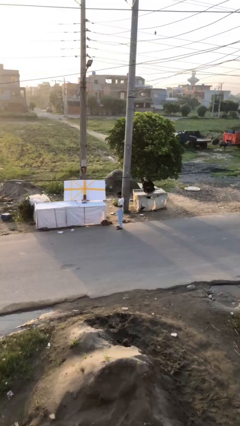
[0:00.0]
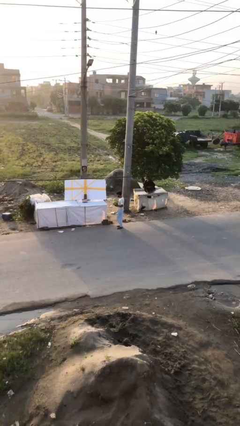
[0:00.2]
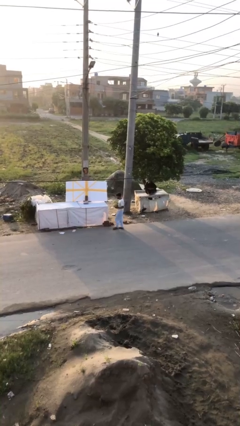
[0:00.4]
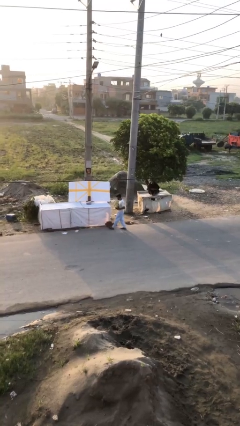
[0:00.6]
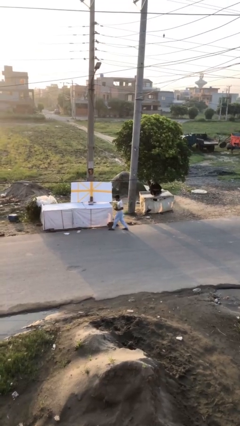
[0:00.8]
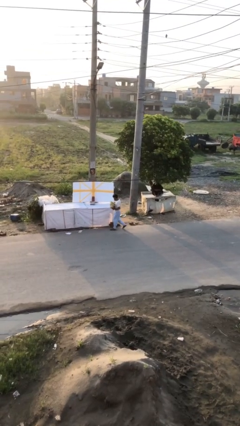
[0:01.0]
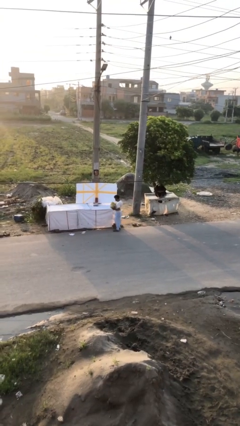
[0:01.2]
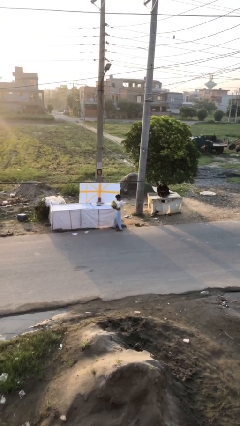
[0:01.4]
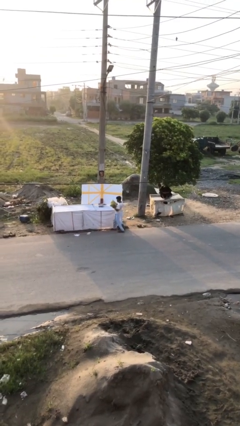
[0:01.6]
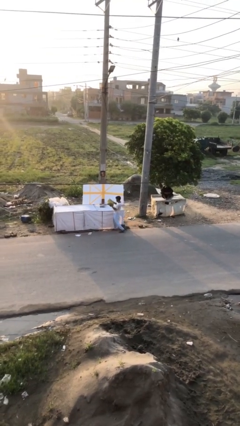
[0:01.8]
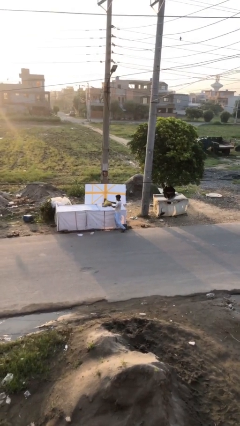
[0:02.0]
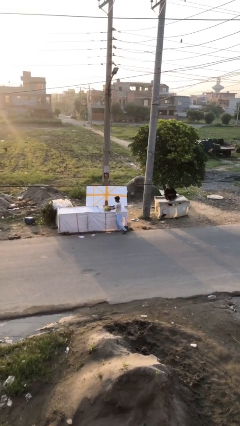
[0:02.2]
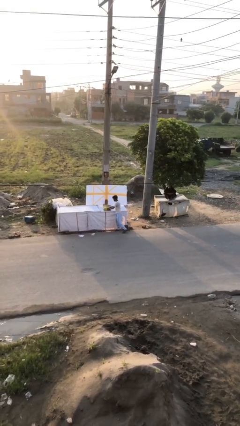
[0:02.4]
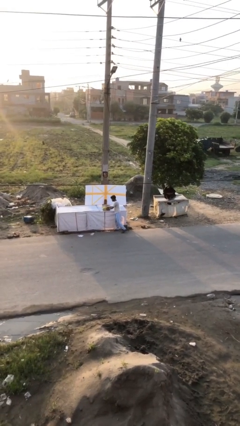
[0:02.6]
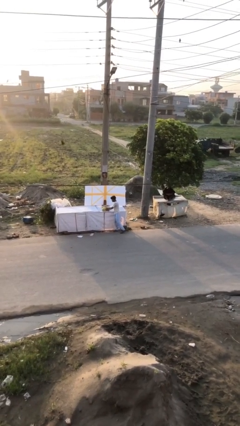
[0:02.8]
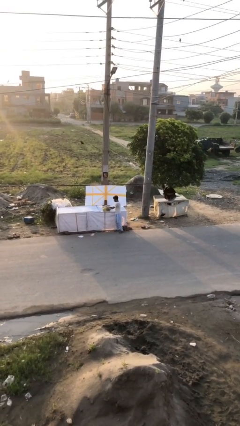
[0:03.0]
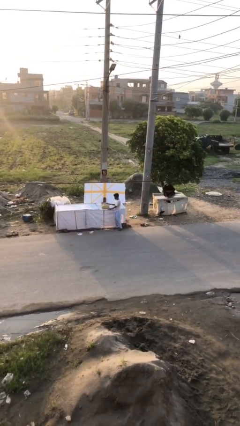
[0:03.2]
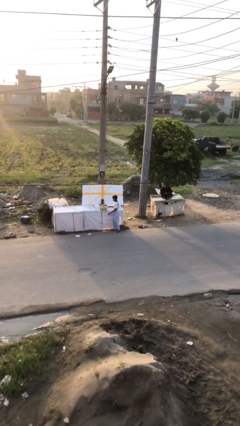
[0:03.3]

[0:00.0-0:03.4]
person puts down object on table

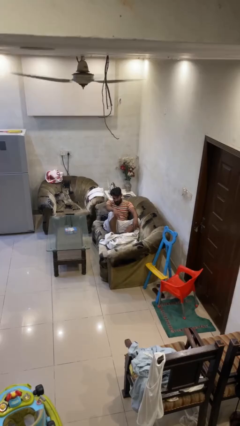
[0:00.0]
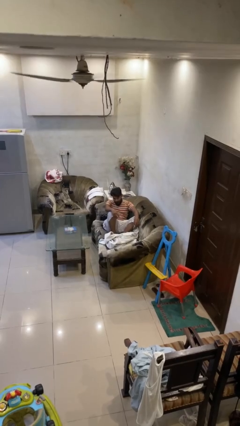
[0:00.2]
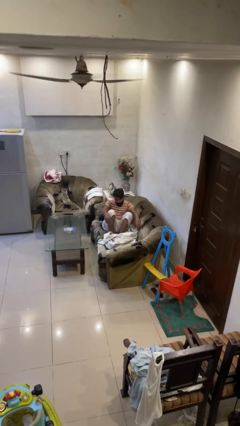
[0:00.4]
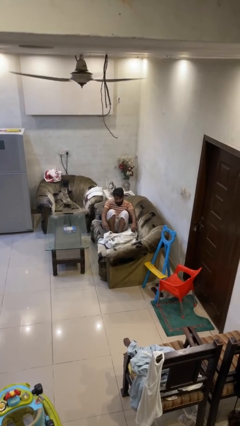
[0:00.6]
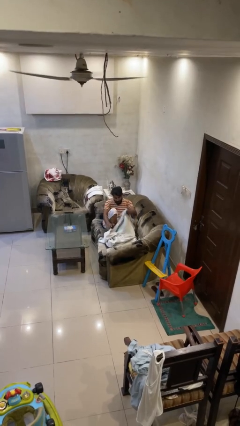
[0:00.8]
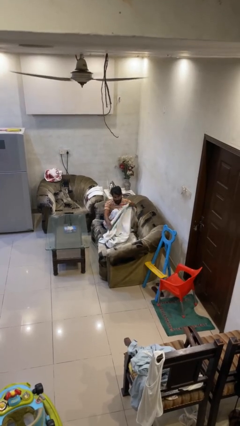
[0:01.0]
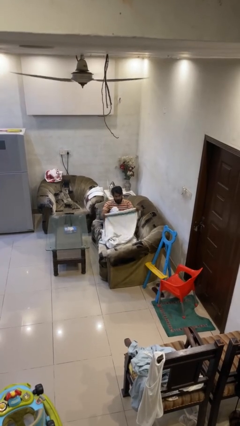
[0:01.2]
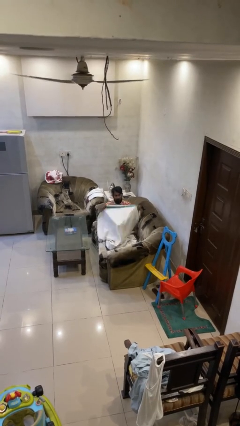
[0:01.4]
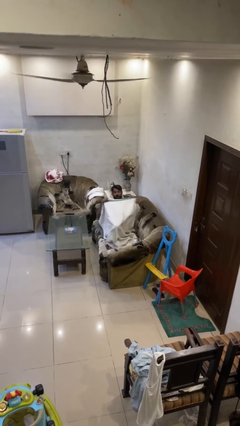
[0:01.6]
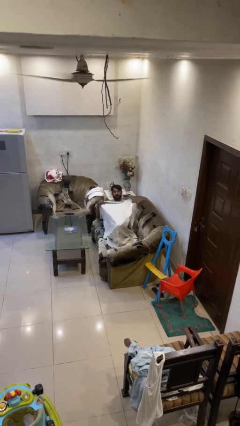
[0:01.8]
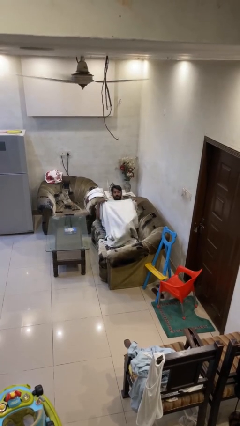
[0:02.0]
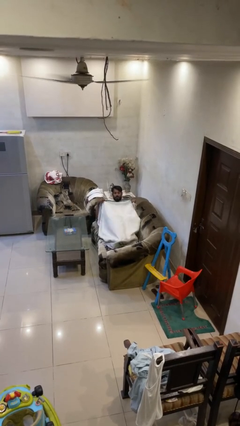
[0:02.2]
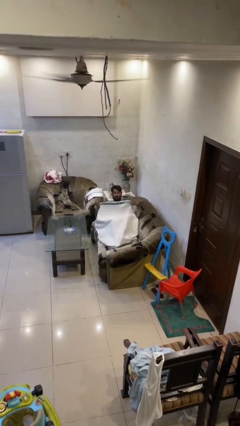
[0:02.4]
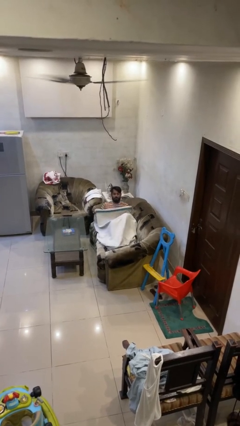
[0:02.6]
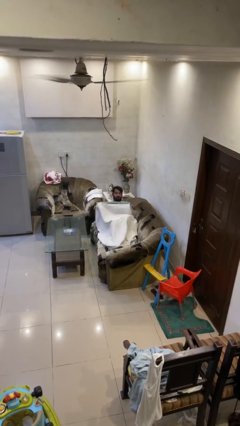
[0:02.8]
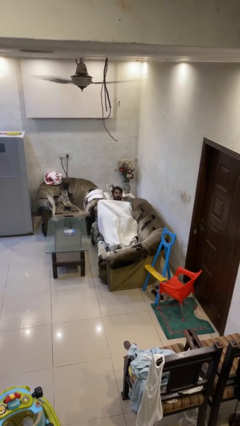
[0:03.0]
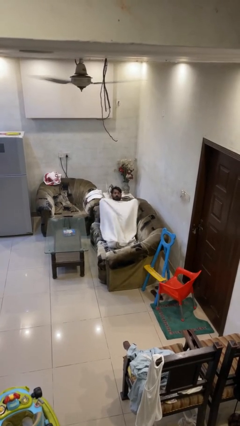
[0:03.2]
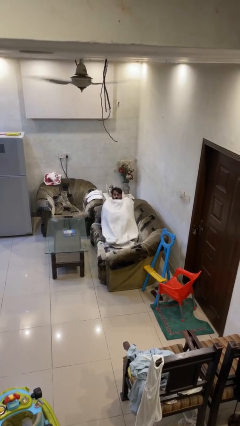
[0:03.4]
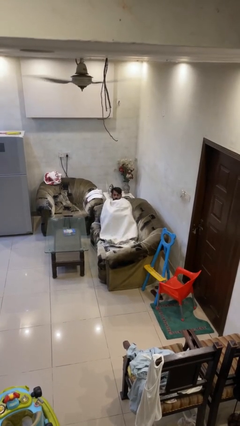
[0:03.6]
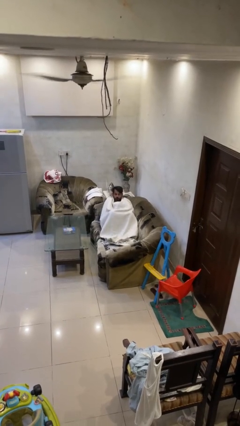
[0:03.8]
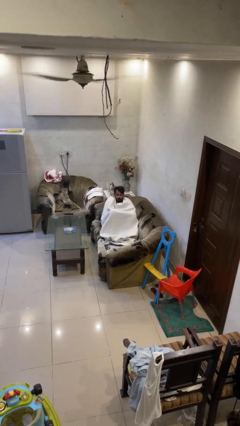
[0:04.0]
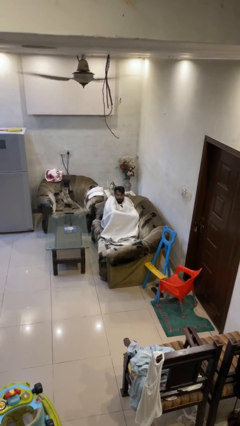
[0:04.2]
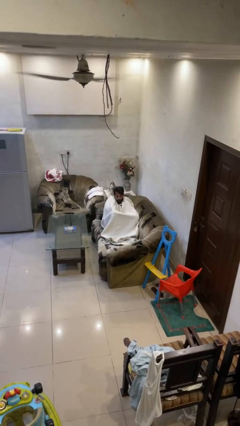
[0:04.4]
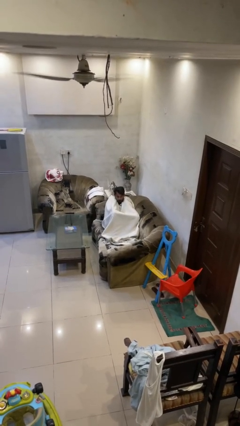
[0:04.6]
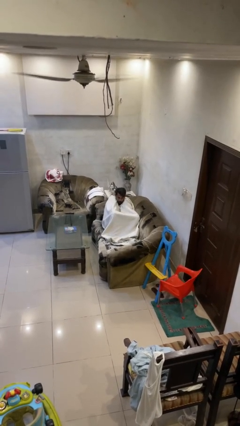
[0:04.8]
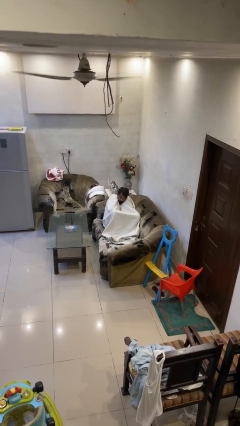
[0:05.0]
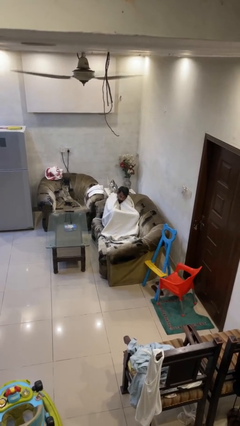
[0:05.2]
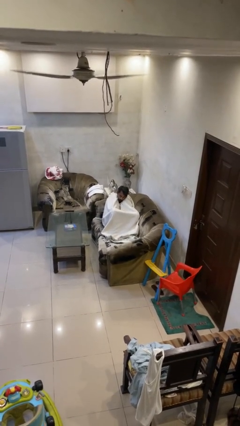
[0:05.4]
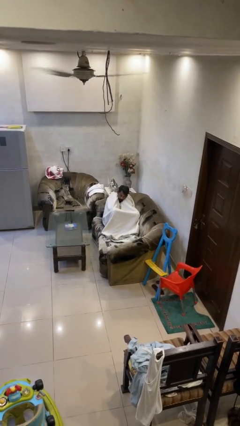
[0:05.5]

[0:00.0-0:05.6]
person covers with blanket

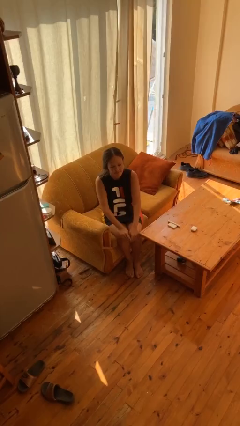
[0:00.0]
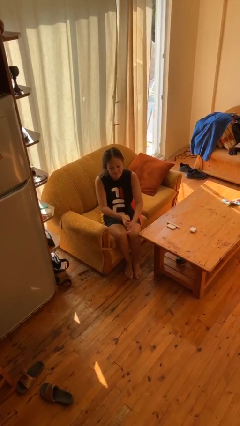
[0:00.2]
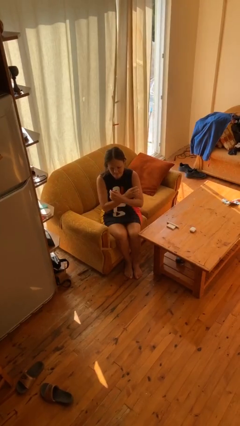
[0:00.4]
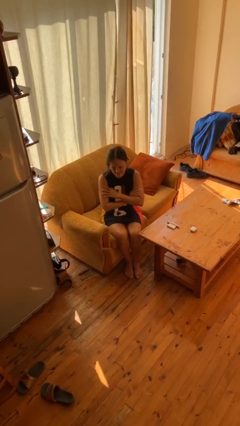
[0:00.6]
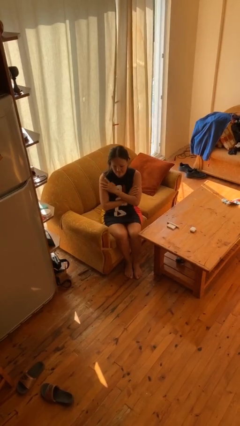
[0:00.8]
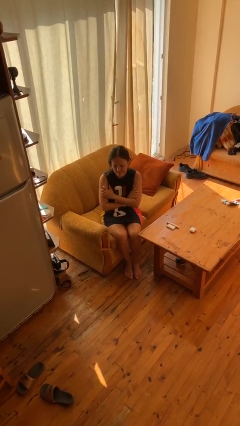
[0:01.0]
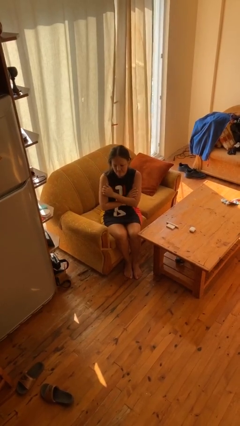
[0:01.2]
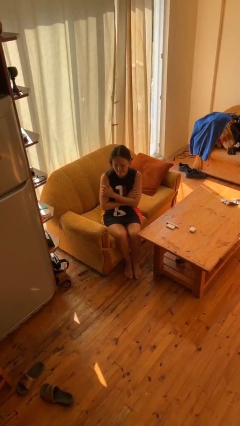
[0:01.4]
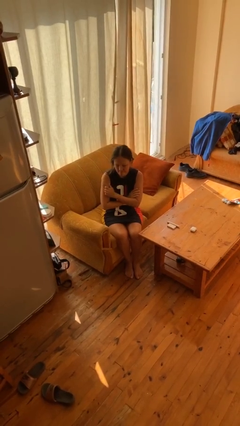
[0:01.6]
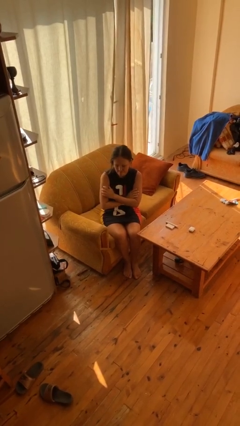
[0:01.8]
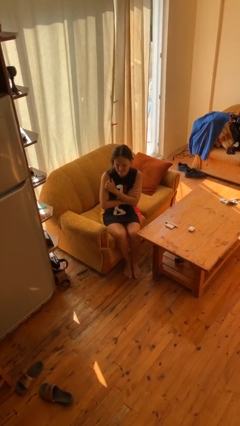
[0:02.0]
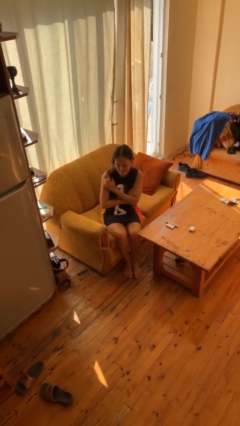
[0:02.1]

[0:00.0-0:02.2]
person crosses arms

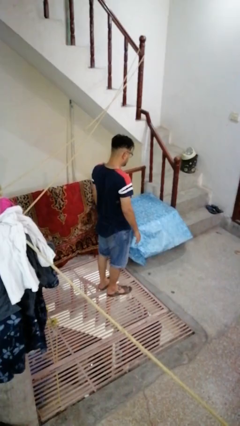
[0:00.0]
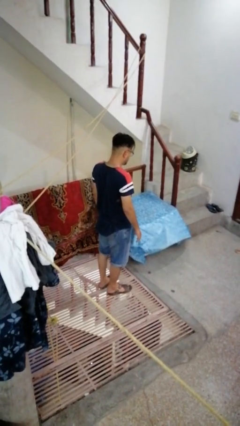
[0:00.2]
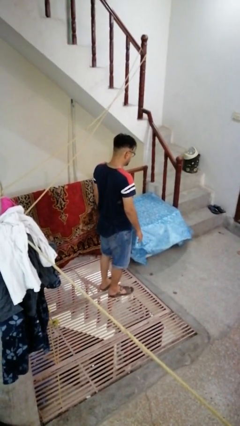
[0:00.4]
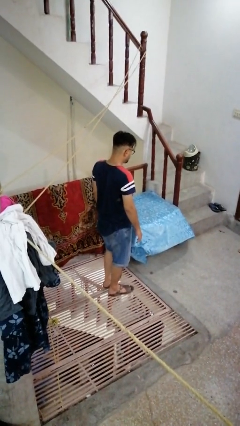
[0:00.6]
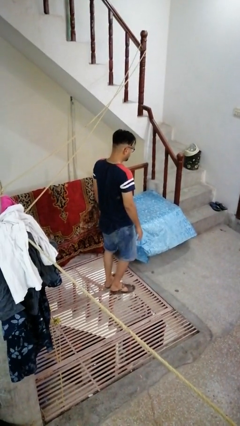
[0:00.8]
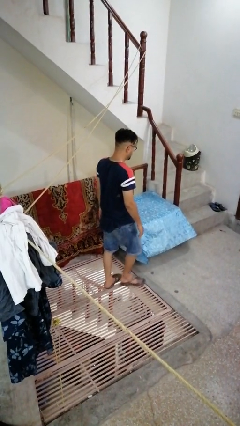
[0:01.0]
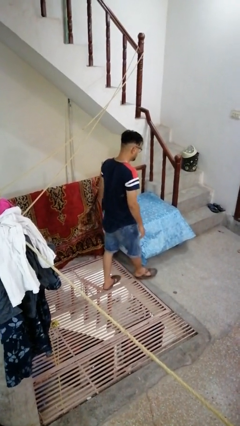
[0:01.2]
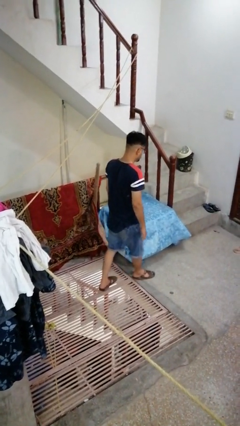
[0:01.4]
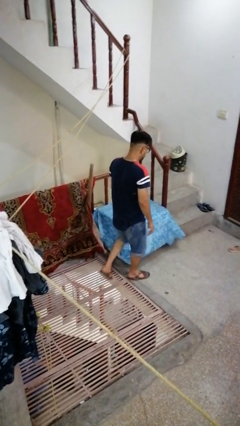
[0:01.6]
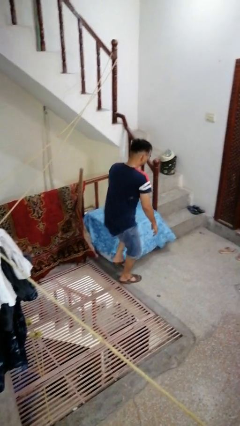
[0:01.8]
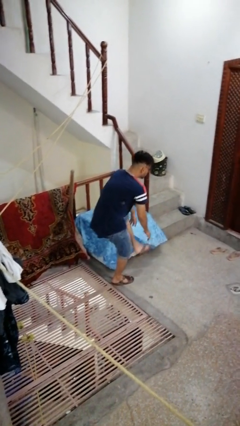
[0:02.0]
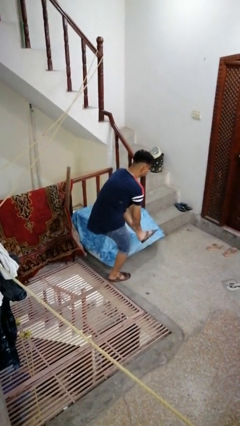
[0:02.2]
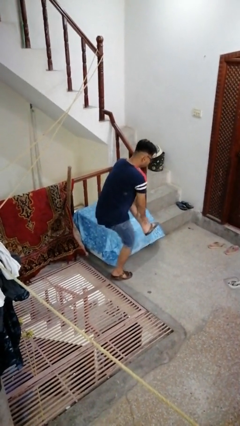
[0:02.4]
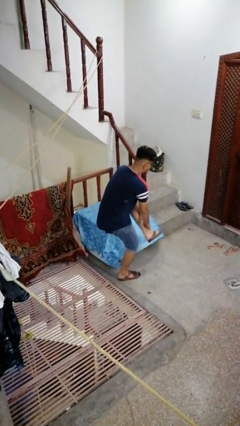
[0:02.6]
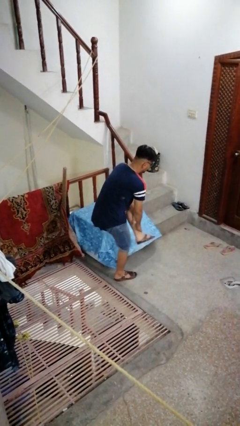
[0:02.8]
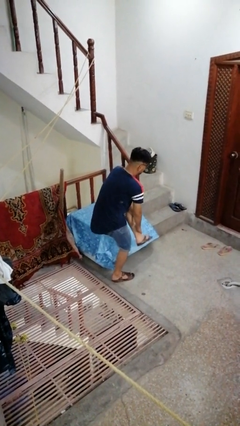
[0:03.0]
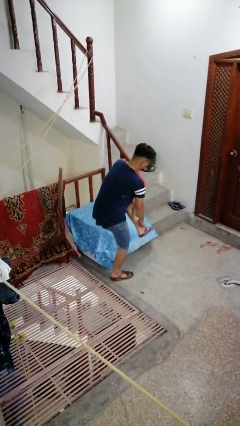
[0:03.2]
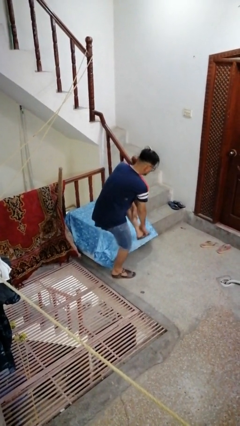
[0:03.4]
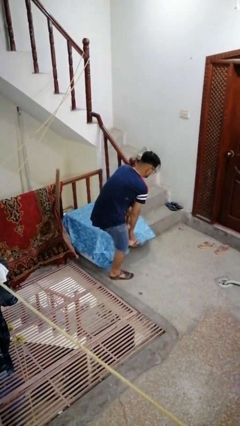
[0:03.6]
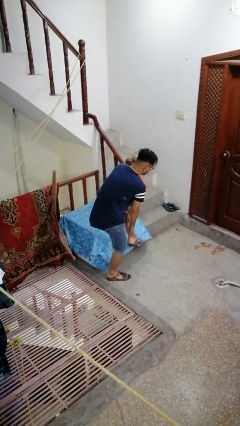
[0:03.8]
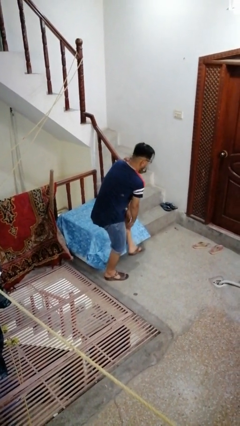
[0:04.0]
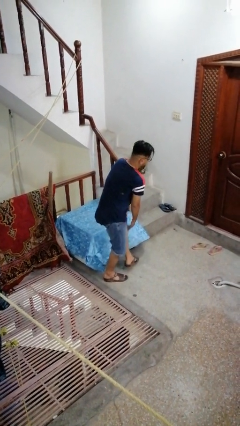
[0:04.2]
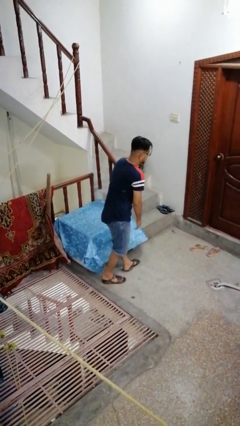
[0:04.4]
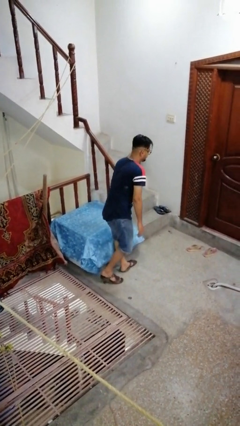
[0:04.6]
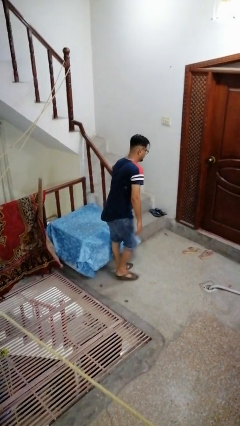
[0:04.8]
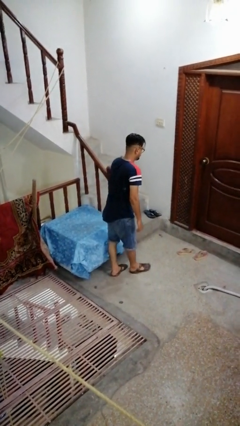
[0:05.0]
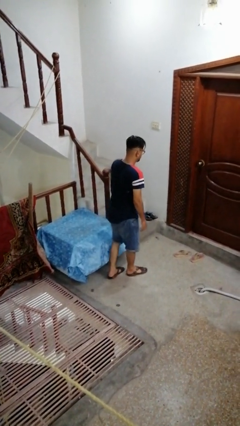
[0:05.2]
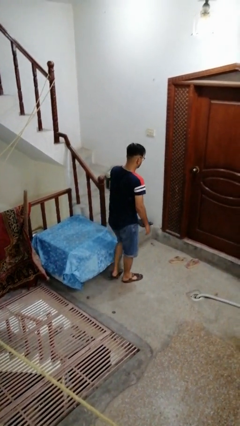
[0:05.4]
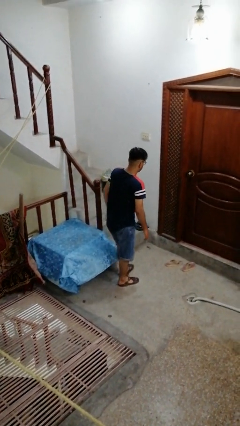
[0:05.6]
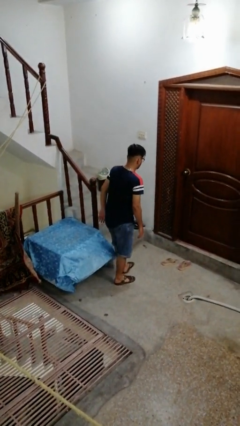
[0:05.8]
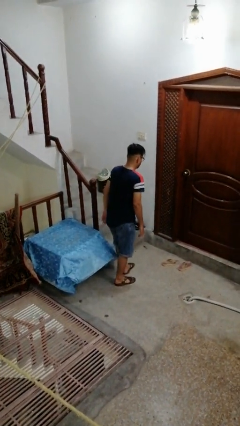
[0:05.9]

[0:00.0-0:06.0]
person bumps into table

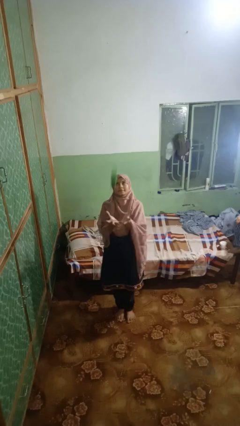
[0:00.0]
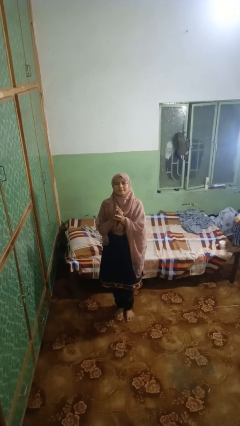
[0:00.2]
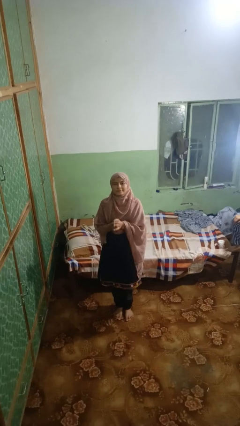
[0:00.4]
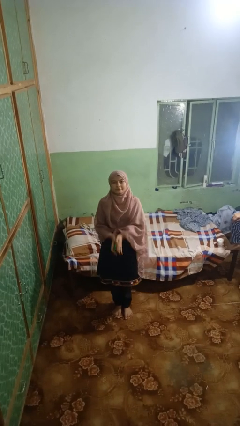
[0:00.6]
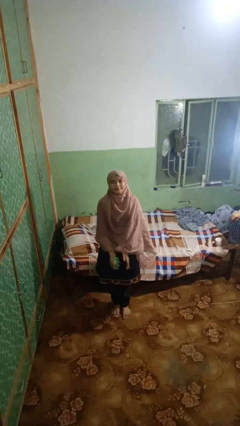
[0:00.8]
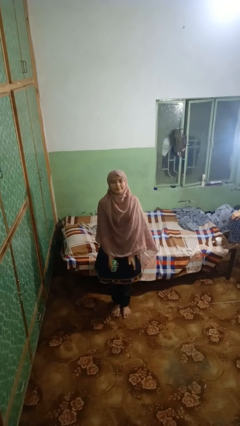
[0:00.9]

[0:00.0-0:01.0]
person picks up object from floor
